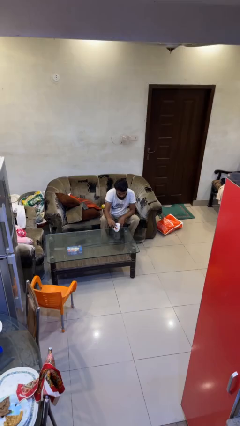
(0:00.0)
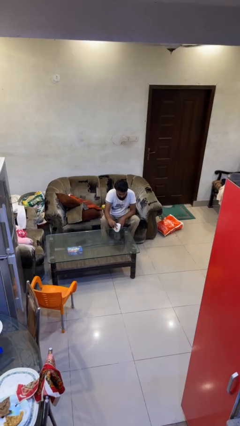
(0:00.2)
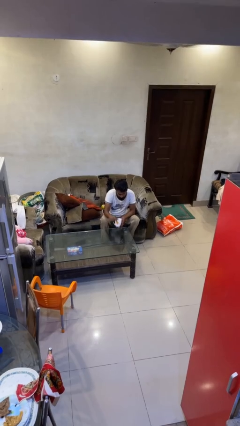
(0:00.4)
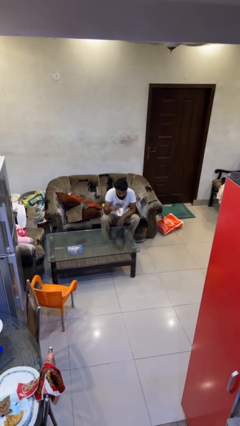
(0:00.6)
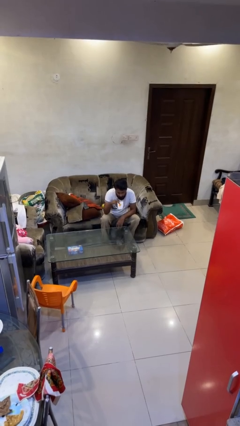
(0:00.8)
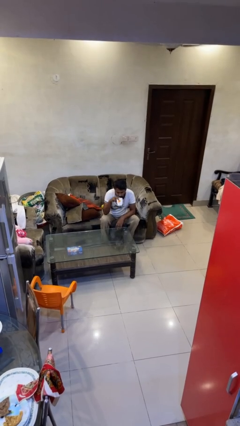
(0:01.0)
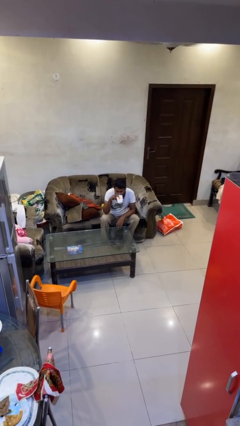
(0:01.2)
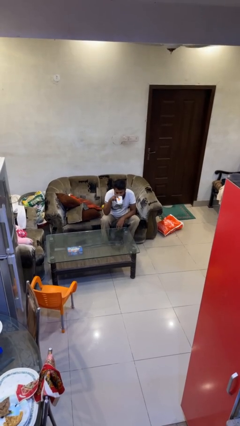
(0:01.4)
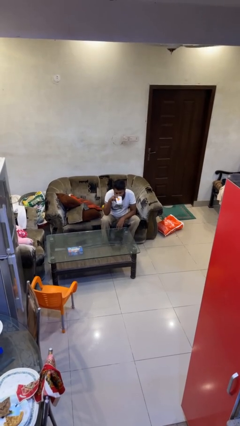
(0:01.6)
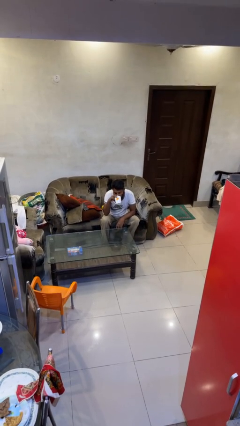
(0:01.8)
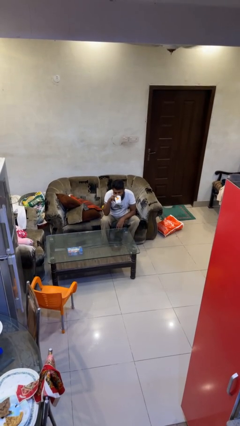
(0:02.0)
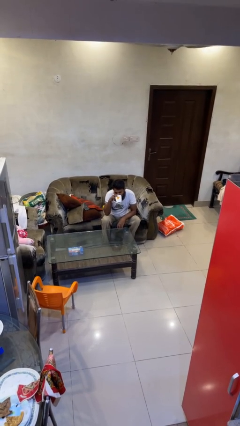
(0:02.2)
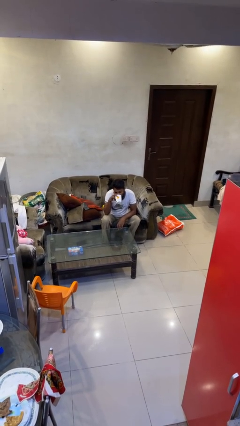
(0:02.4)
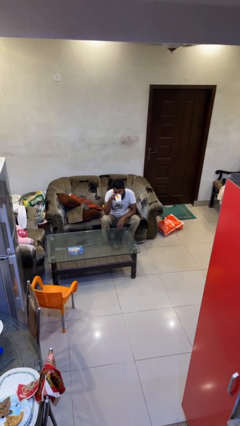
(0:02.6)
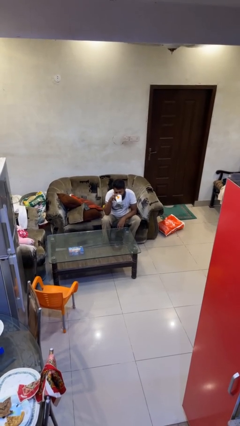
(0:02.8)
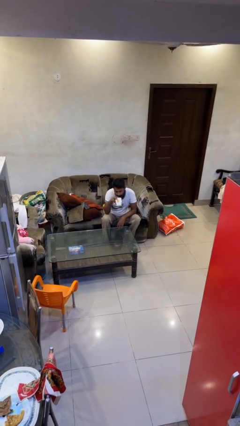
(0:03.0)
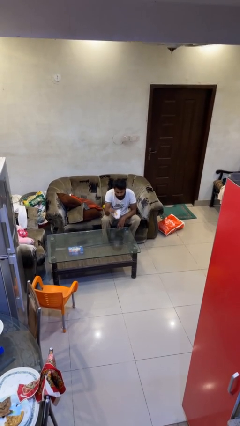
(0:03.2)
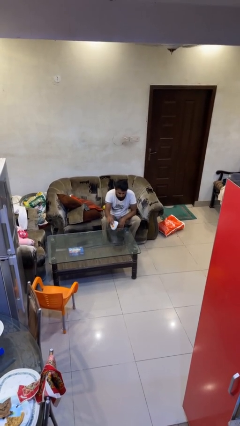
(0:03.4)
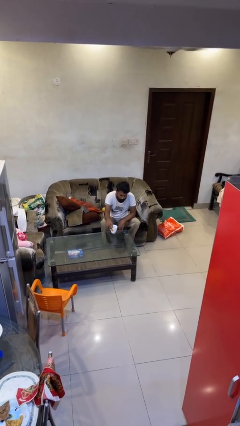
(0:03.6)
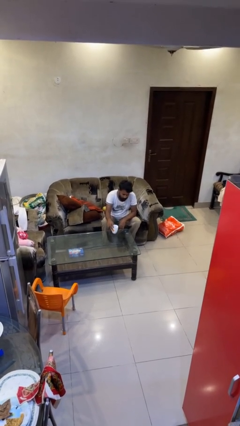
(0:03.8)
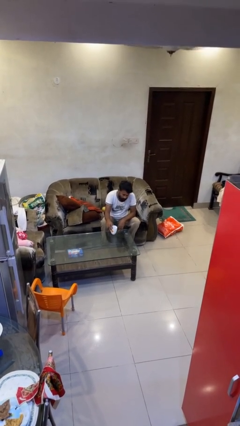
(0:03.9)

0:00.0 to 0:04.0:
person drinks from mug

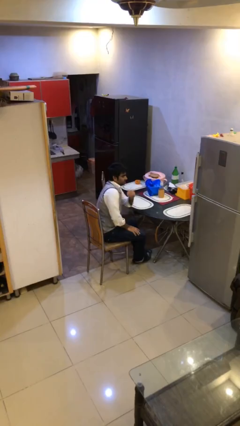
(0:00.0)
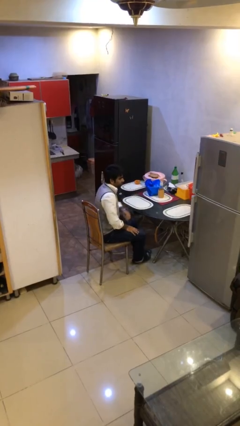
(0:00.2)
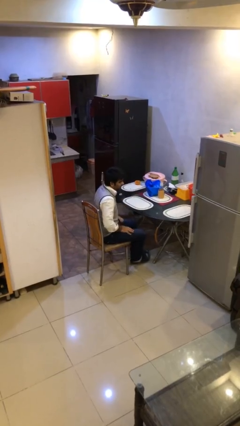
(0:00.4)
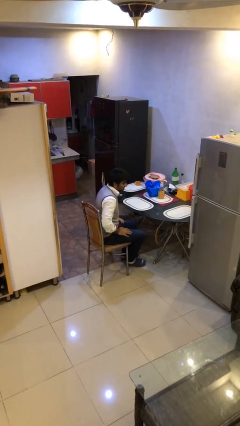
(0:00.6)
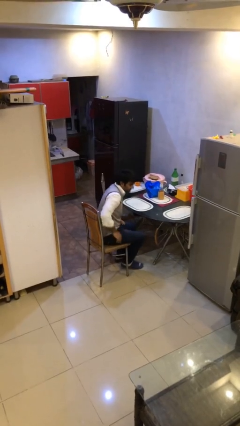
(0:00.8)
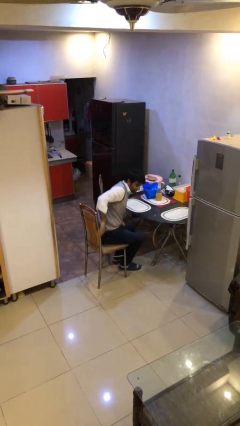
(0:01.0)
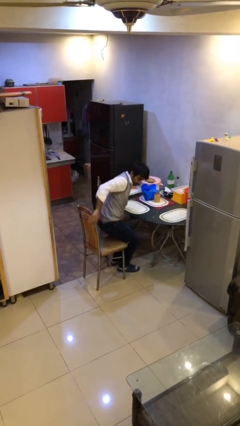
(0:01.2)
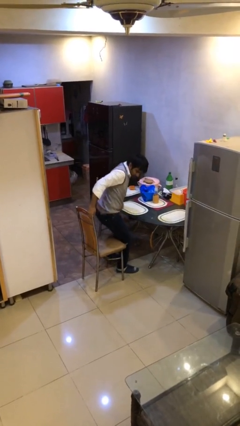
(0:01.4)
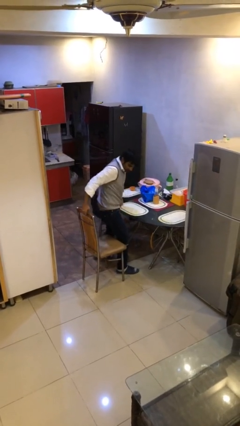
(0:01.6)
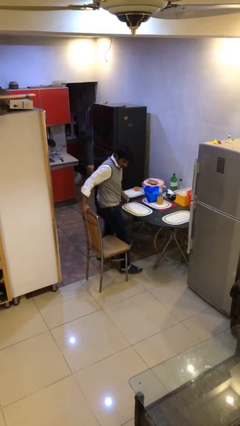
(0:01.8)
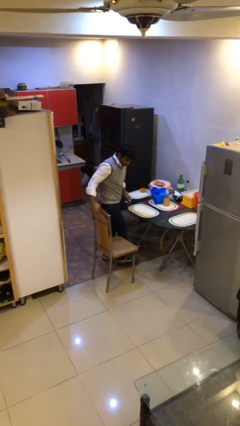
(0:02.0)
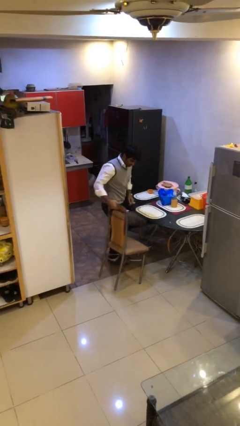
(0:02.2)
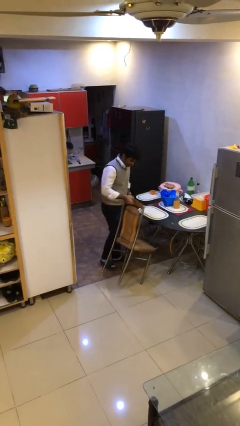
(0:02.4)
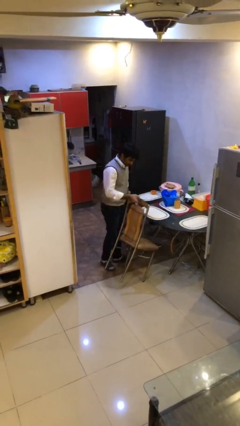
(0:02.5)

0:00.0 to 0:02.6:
person stands up

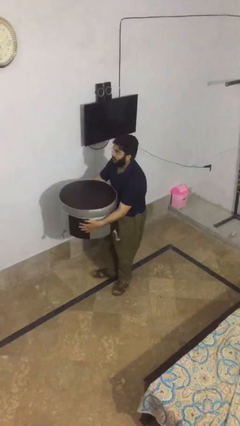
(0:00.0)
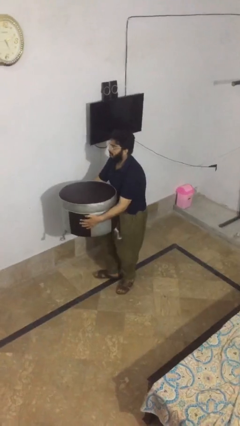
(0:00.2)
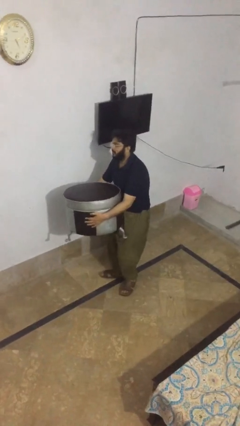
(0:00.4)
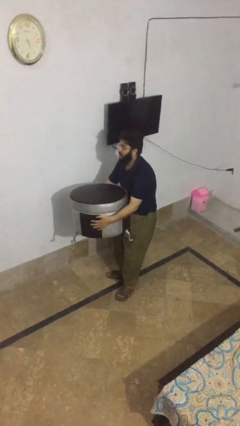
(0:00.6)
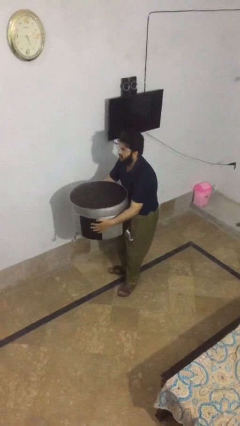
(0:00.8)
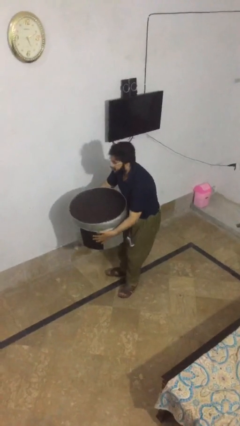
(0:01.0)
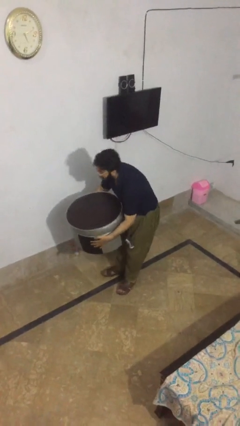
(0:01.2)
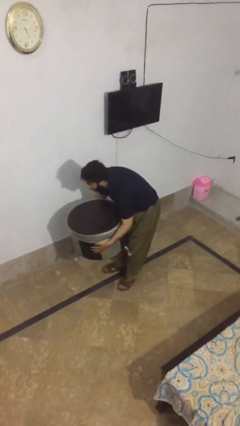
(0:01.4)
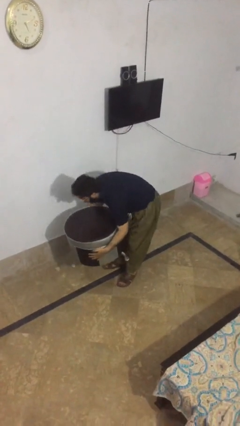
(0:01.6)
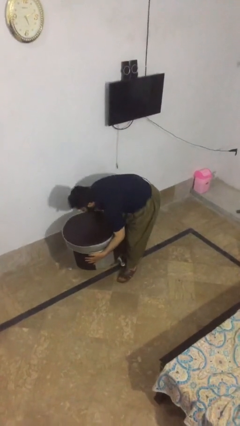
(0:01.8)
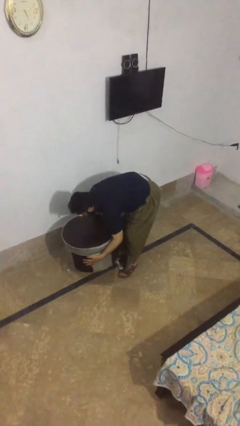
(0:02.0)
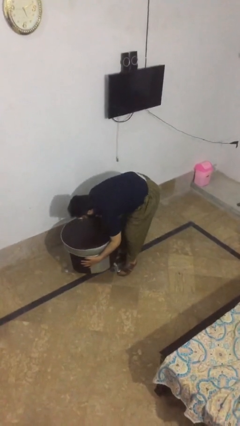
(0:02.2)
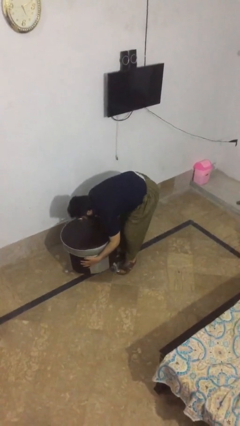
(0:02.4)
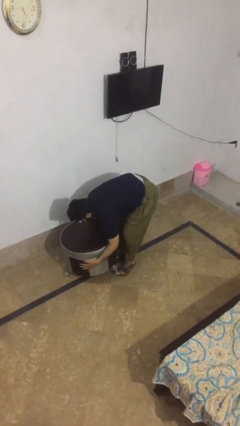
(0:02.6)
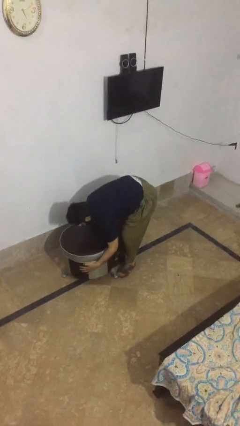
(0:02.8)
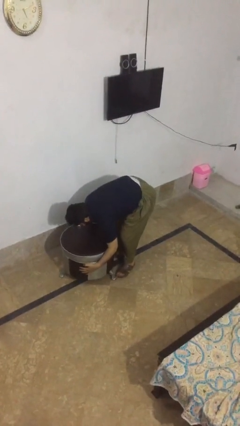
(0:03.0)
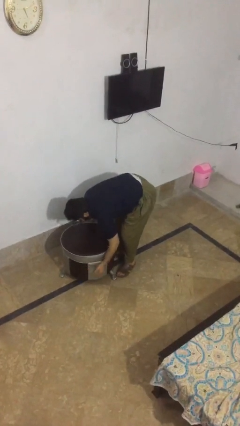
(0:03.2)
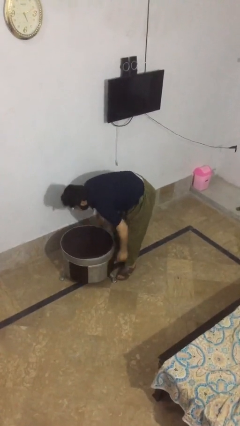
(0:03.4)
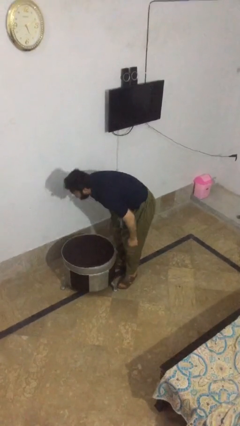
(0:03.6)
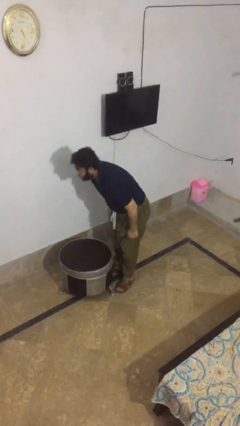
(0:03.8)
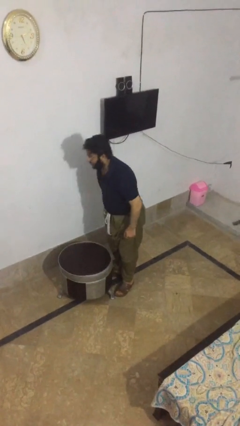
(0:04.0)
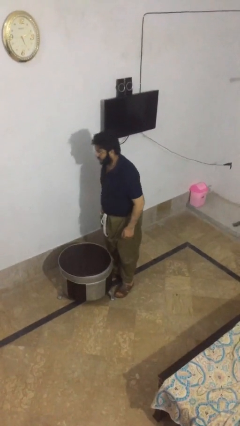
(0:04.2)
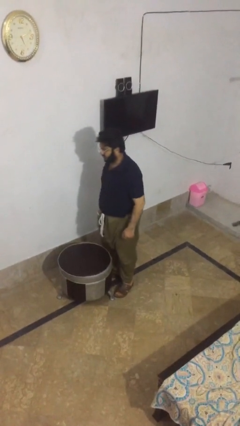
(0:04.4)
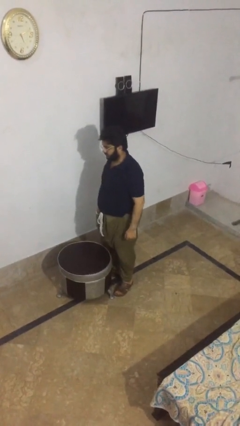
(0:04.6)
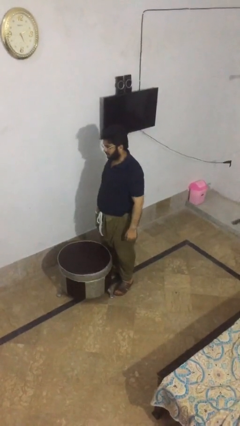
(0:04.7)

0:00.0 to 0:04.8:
person puts down object on floor

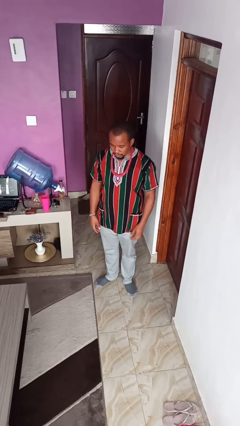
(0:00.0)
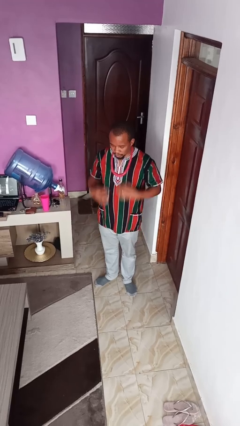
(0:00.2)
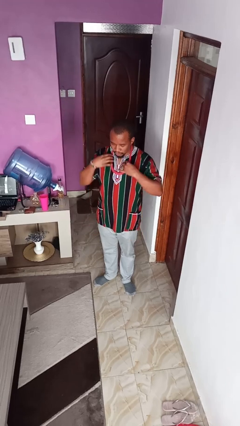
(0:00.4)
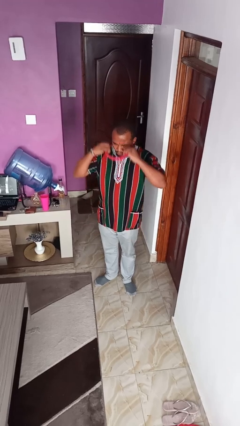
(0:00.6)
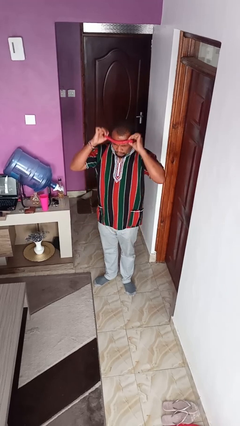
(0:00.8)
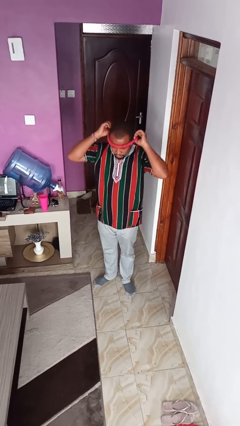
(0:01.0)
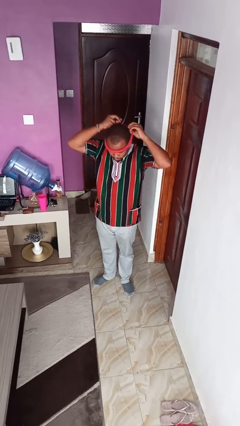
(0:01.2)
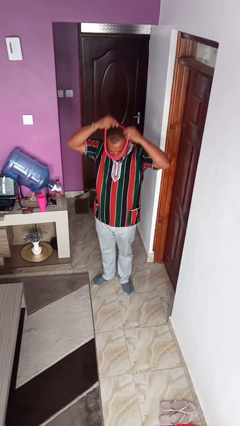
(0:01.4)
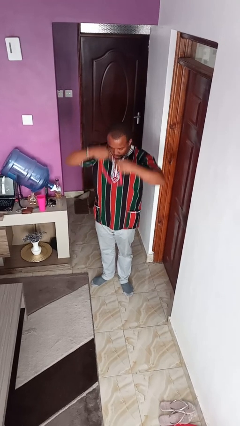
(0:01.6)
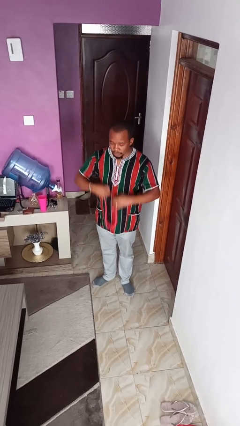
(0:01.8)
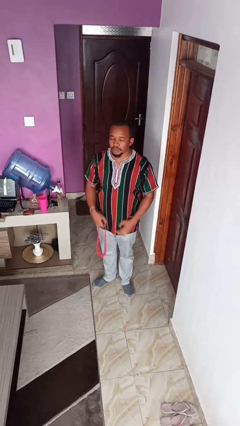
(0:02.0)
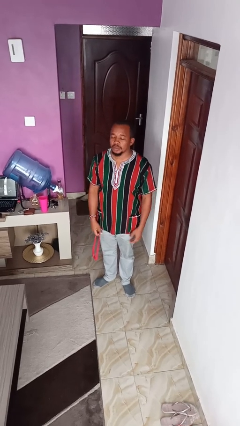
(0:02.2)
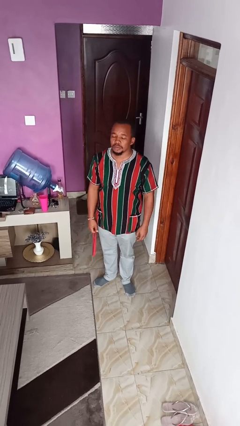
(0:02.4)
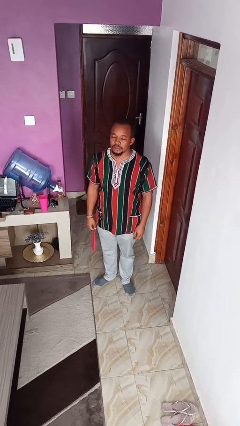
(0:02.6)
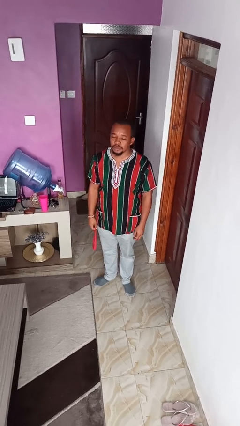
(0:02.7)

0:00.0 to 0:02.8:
person takes off necklace

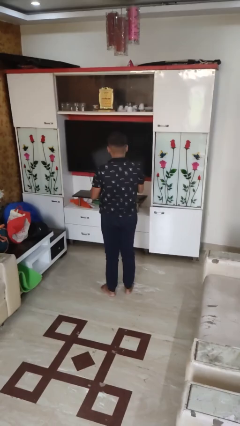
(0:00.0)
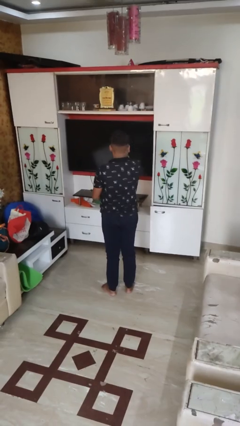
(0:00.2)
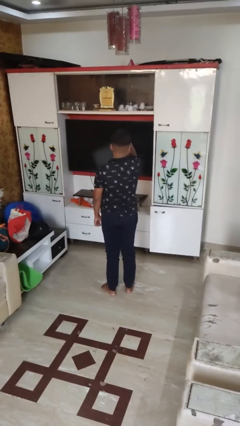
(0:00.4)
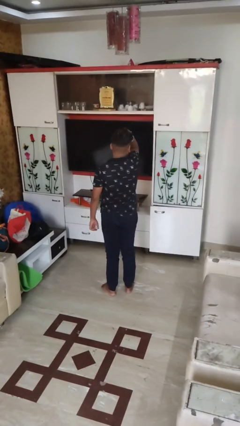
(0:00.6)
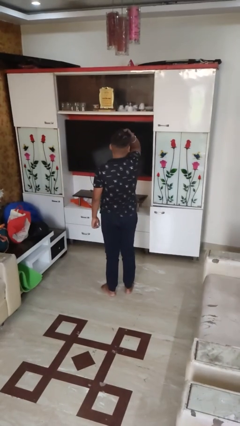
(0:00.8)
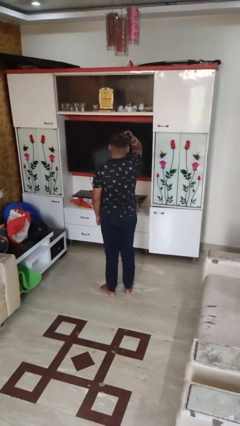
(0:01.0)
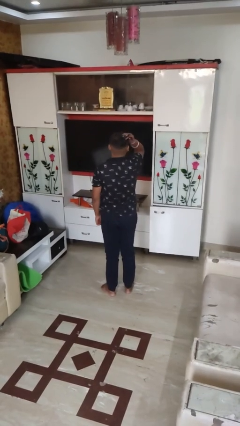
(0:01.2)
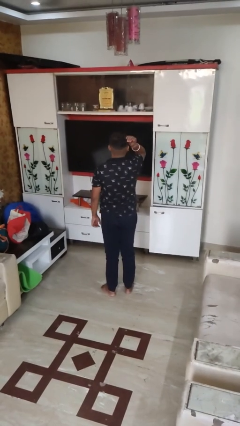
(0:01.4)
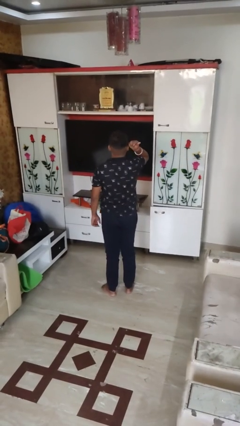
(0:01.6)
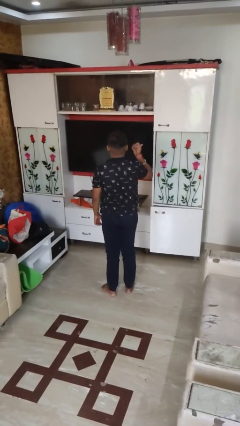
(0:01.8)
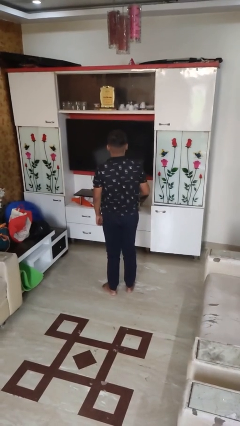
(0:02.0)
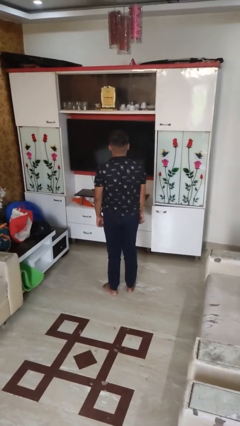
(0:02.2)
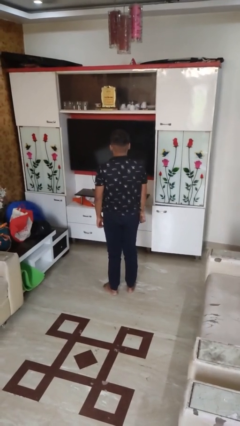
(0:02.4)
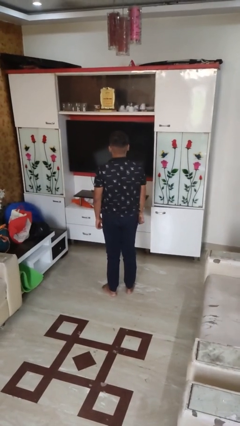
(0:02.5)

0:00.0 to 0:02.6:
person strokes hair

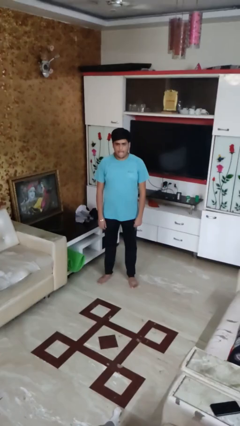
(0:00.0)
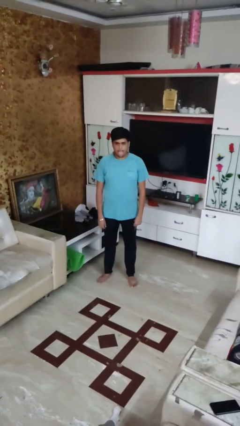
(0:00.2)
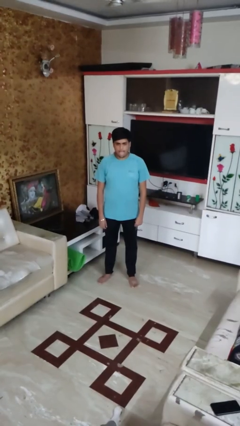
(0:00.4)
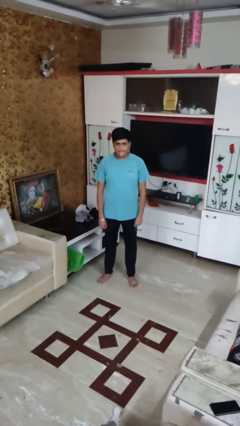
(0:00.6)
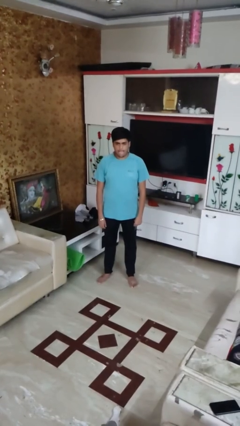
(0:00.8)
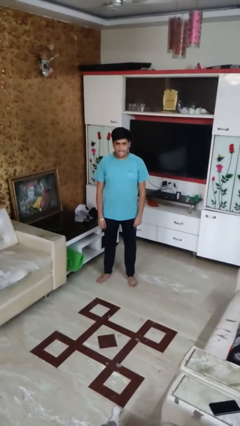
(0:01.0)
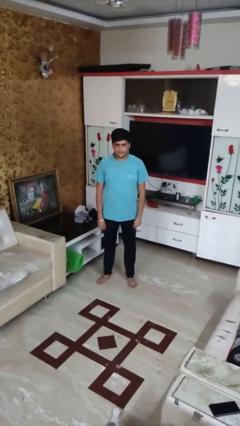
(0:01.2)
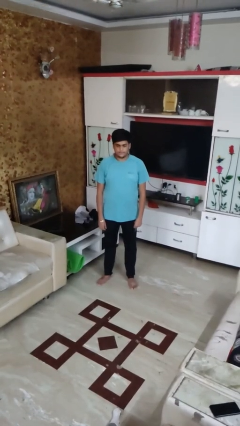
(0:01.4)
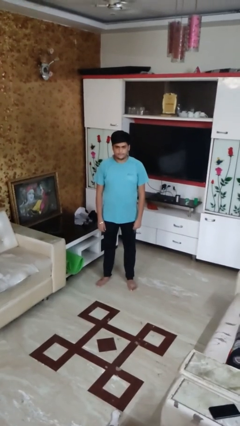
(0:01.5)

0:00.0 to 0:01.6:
person sticks out tongue
